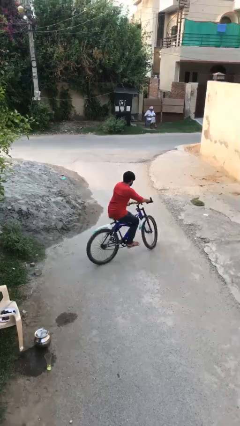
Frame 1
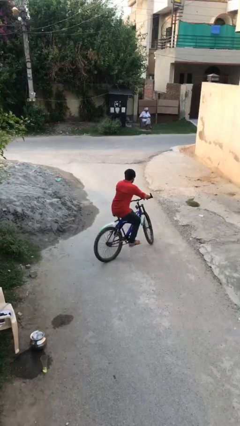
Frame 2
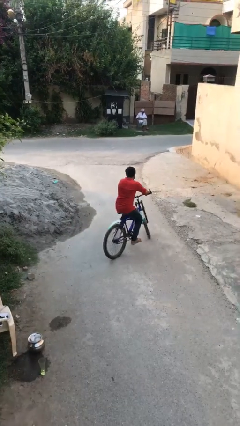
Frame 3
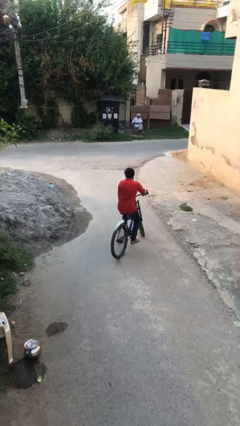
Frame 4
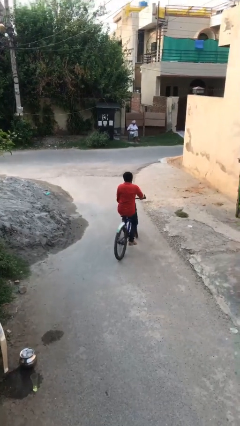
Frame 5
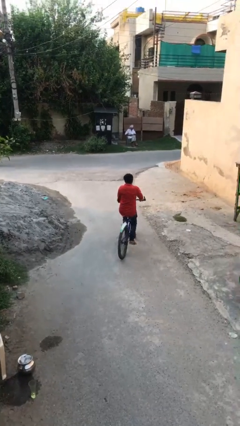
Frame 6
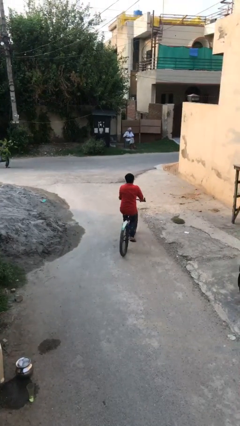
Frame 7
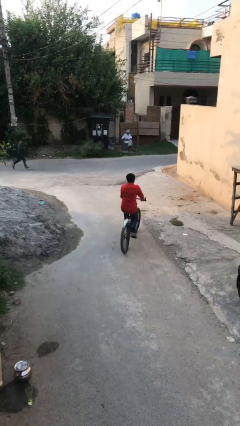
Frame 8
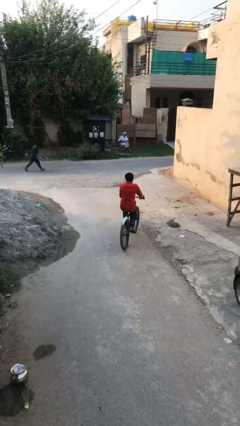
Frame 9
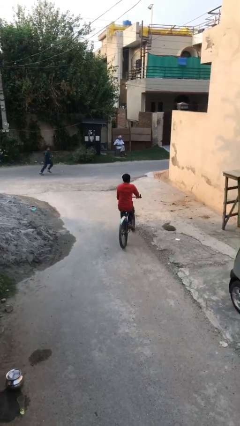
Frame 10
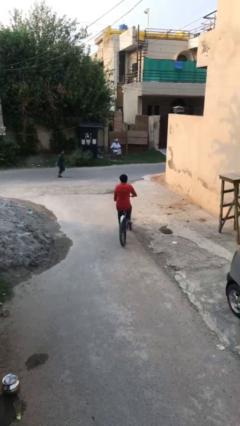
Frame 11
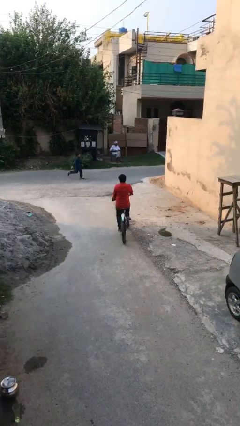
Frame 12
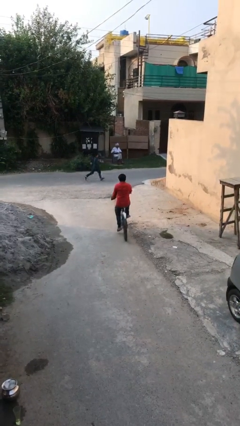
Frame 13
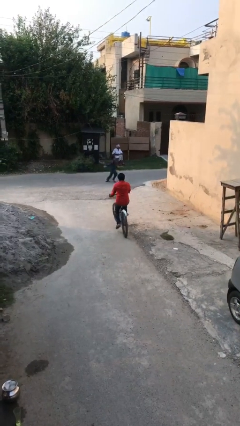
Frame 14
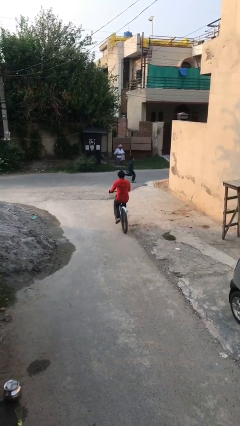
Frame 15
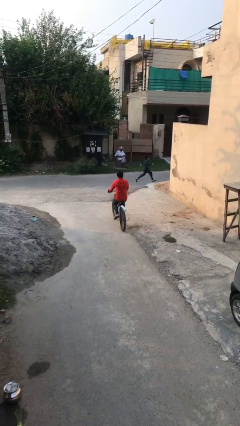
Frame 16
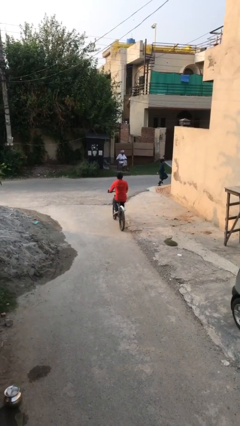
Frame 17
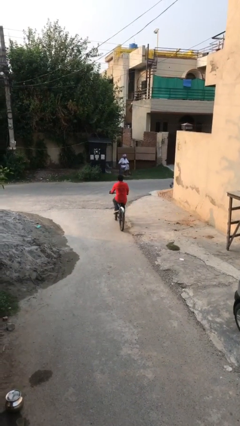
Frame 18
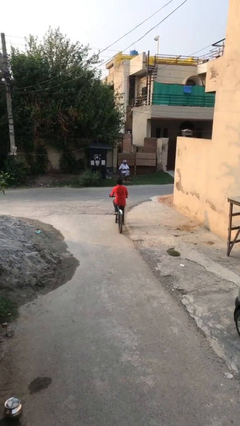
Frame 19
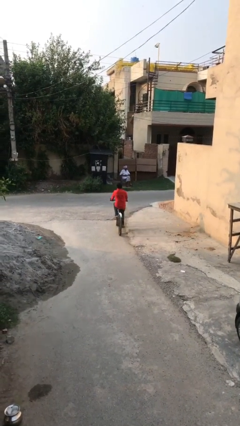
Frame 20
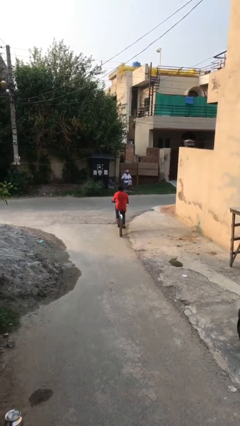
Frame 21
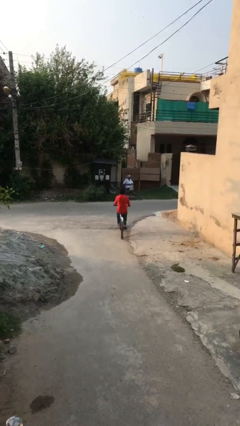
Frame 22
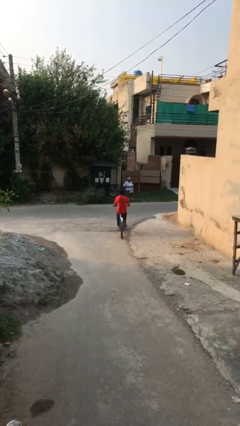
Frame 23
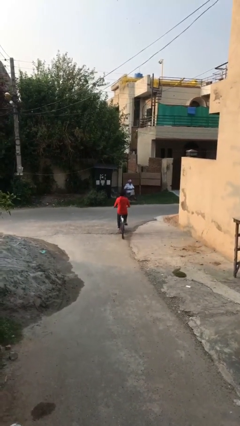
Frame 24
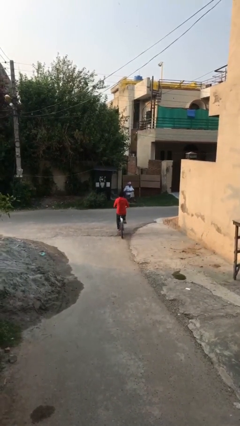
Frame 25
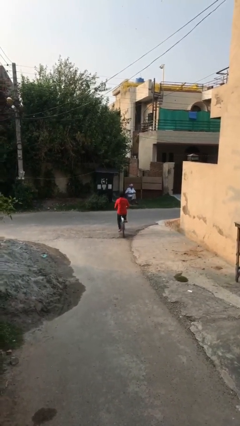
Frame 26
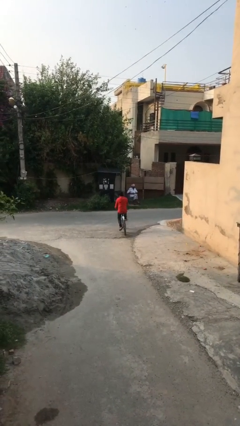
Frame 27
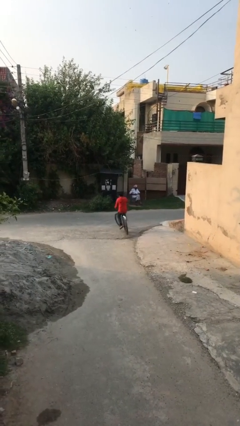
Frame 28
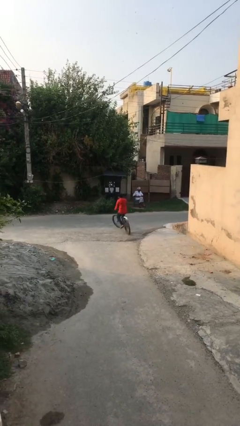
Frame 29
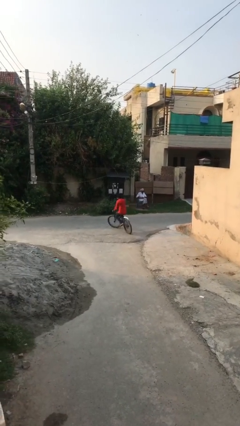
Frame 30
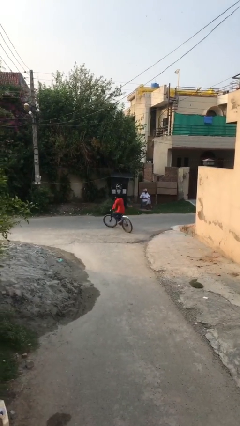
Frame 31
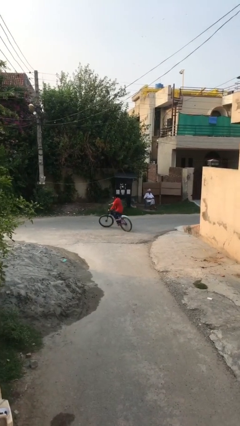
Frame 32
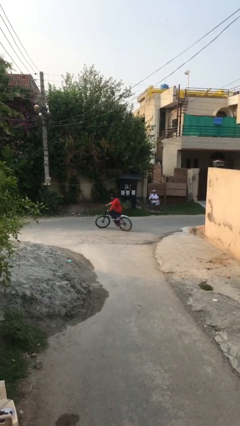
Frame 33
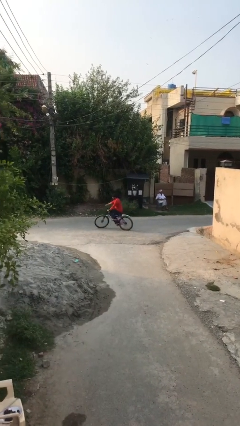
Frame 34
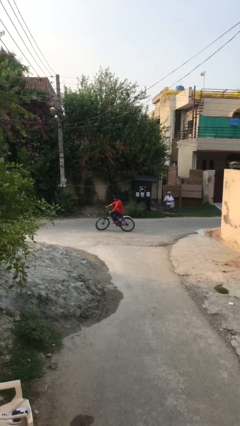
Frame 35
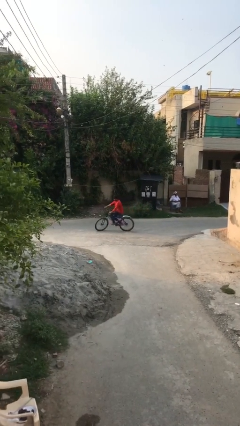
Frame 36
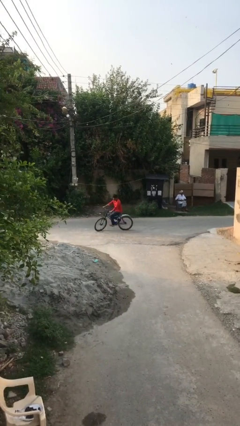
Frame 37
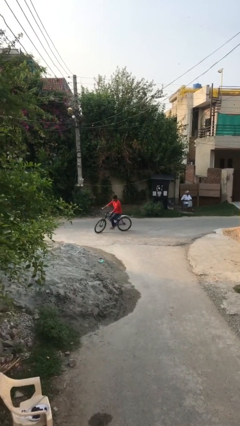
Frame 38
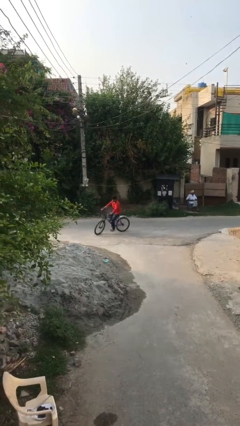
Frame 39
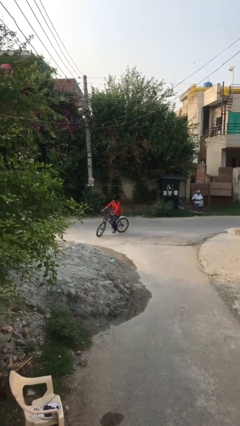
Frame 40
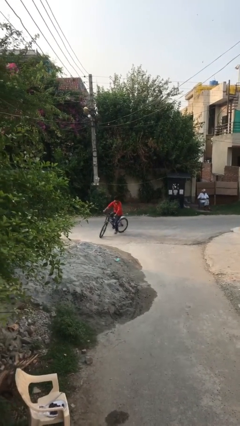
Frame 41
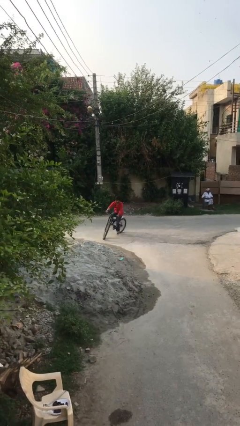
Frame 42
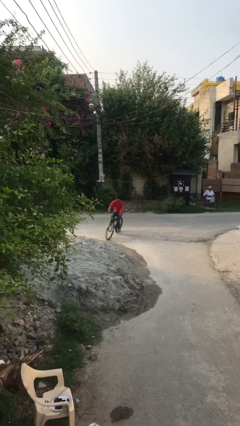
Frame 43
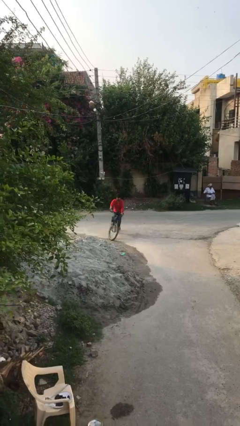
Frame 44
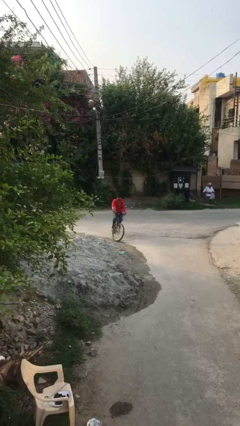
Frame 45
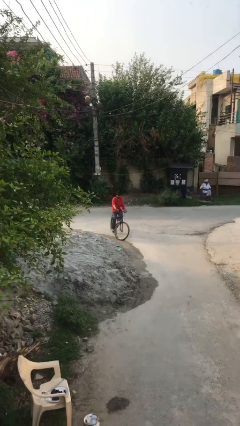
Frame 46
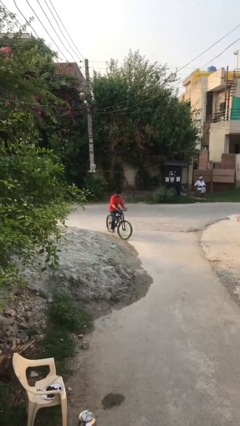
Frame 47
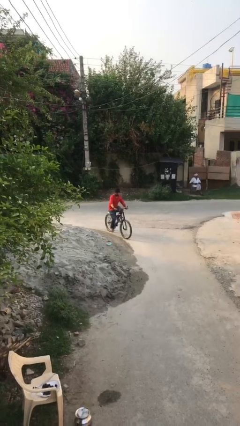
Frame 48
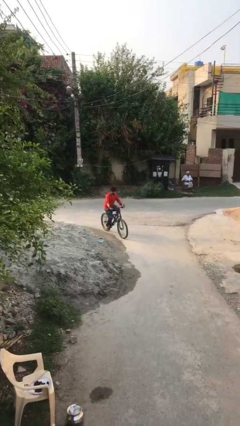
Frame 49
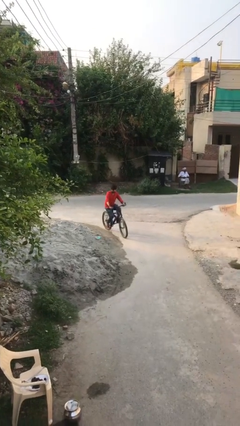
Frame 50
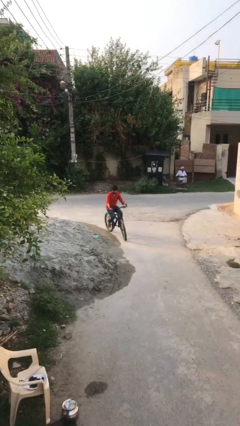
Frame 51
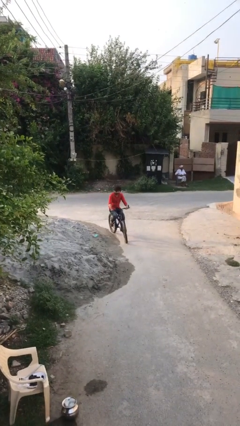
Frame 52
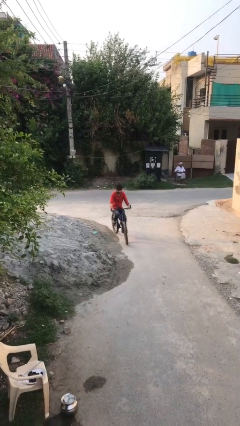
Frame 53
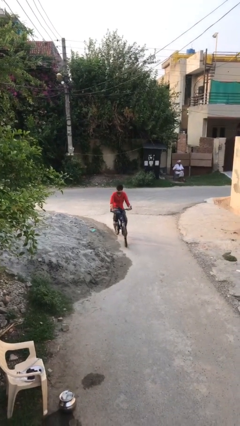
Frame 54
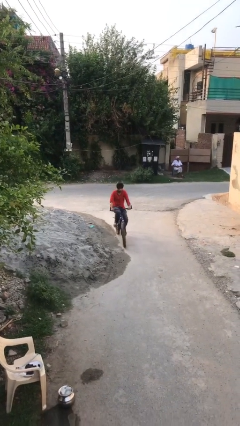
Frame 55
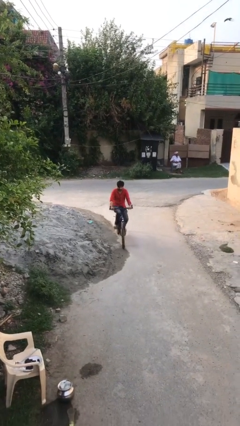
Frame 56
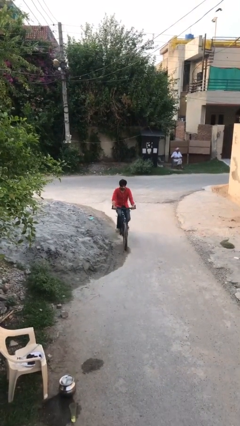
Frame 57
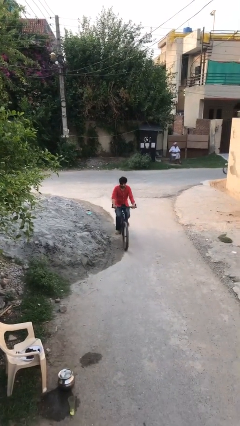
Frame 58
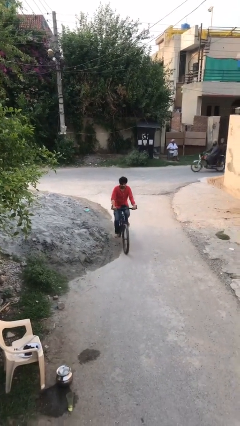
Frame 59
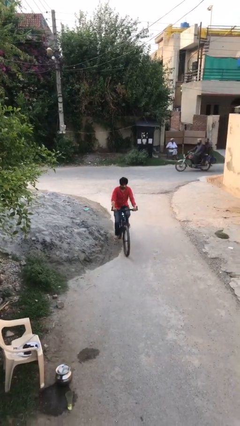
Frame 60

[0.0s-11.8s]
person rides bicycle

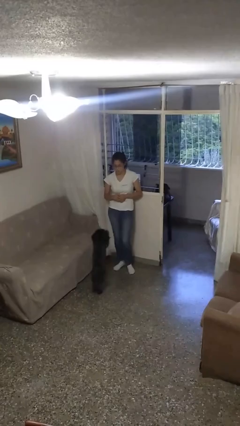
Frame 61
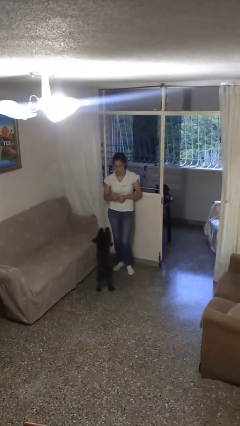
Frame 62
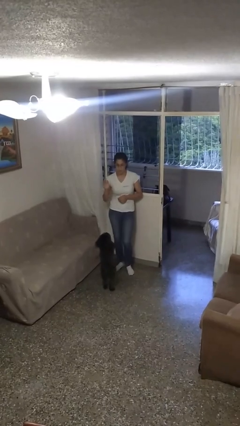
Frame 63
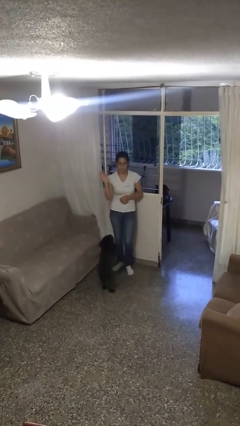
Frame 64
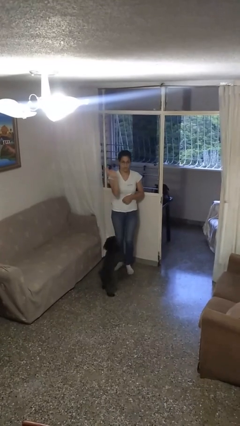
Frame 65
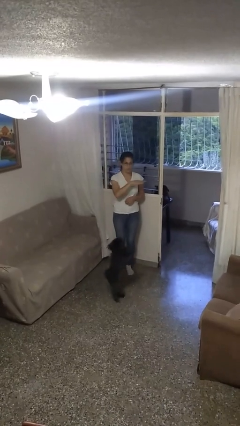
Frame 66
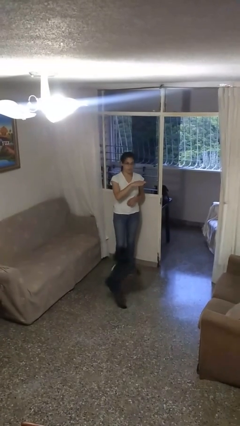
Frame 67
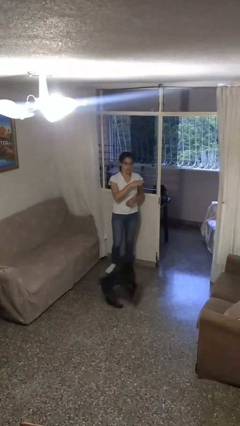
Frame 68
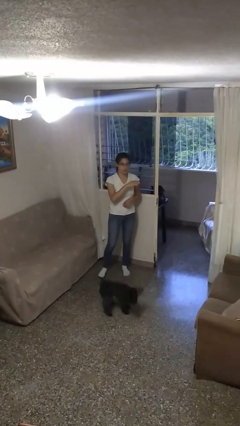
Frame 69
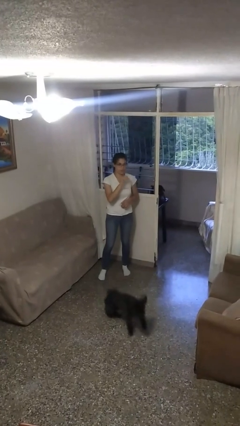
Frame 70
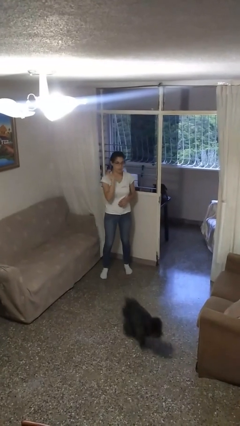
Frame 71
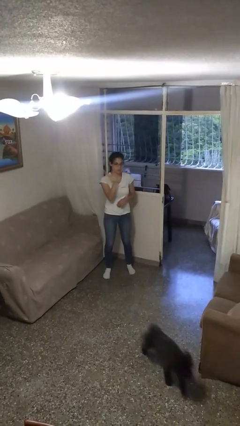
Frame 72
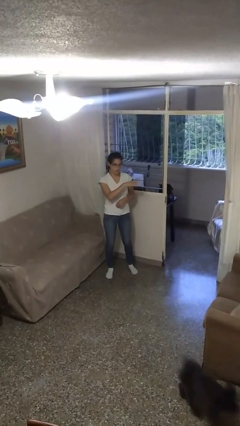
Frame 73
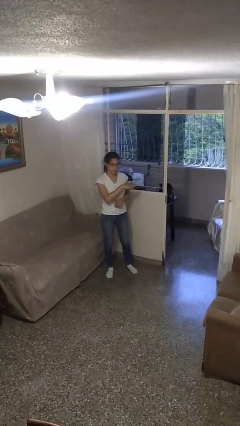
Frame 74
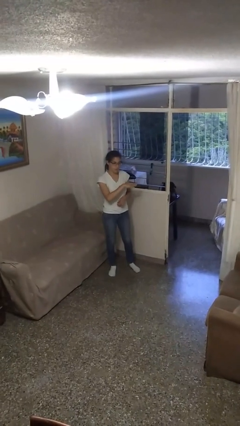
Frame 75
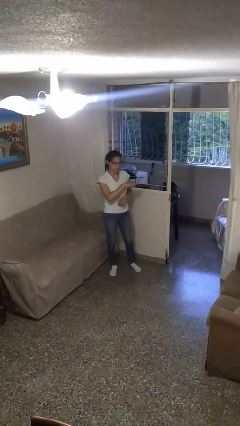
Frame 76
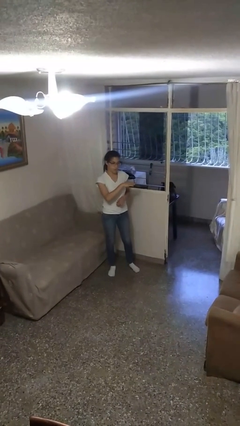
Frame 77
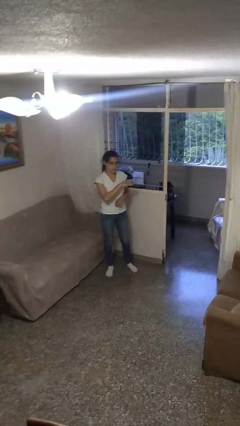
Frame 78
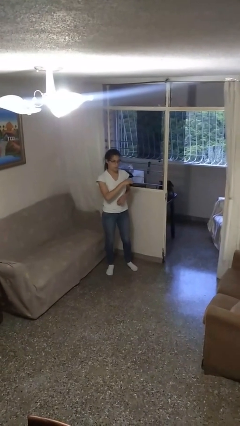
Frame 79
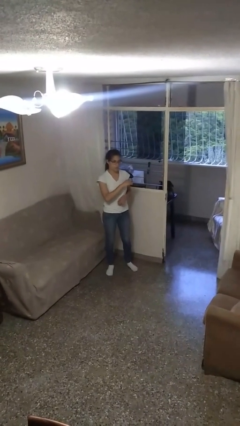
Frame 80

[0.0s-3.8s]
person gestures swipe left

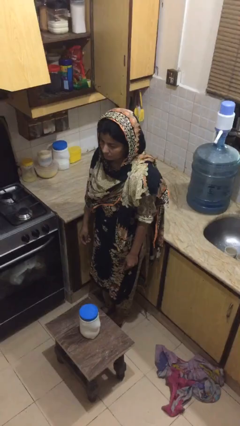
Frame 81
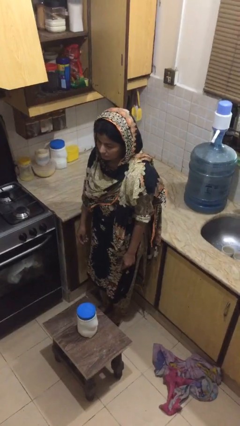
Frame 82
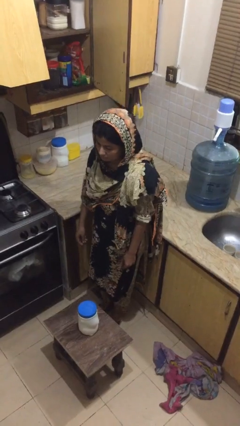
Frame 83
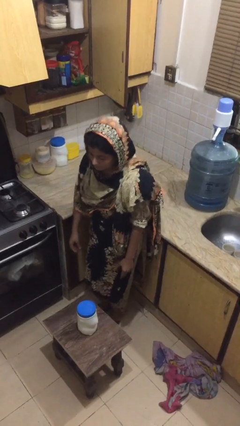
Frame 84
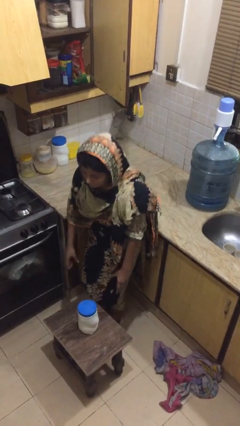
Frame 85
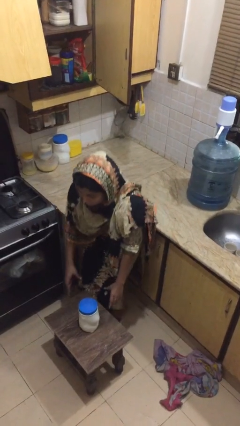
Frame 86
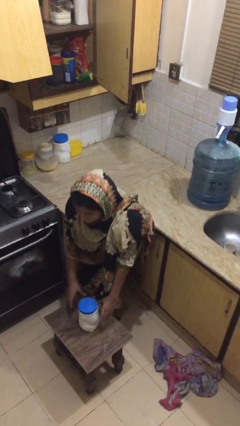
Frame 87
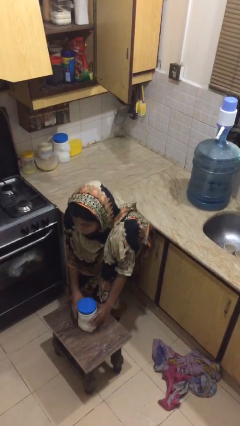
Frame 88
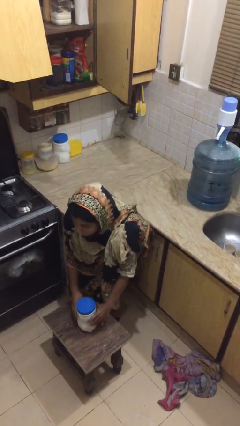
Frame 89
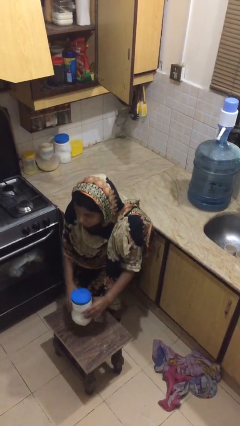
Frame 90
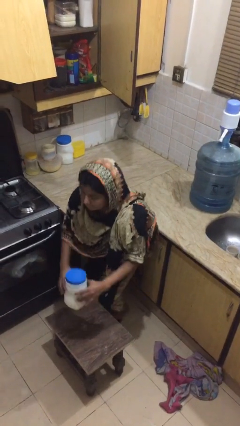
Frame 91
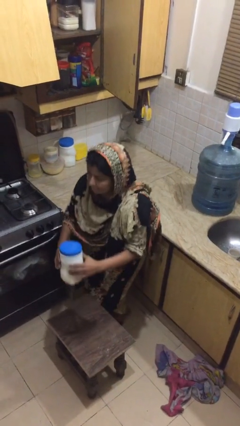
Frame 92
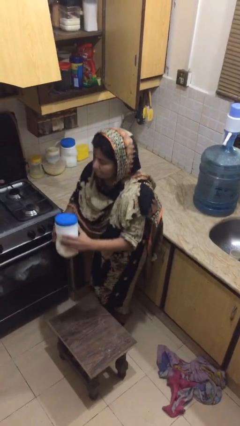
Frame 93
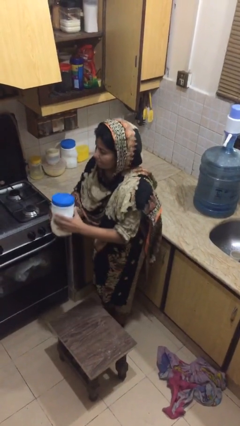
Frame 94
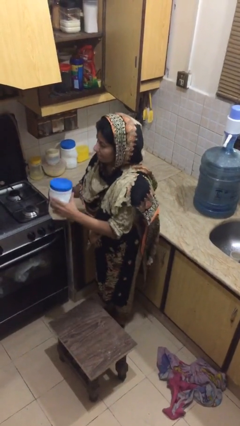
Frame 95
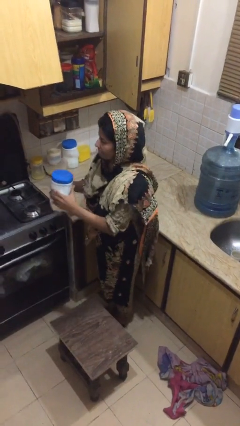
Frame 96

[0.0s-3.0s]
person picks up object from table
